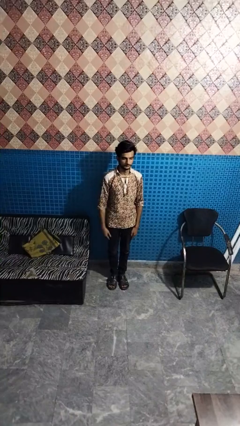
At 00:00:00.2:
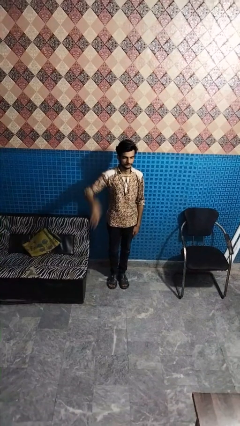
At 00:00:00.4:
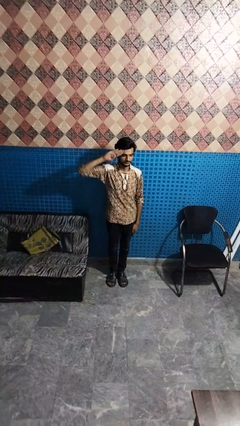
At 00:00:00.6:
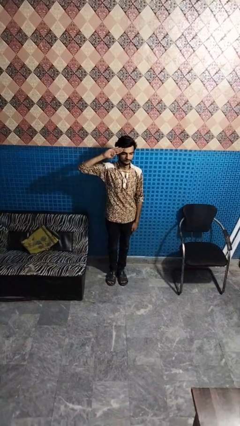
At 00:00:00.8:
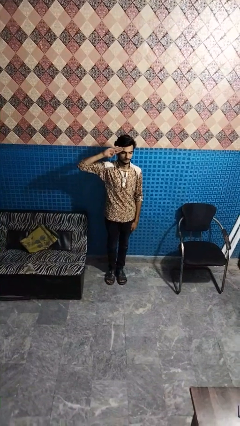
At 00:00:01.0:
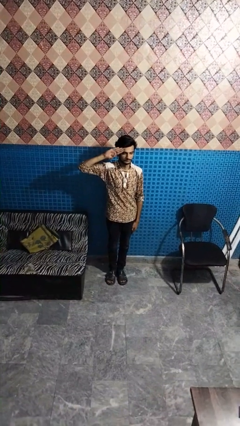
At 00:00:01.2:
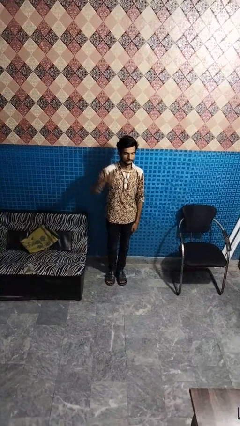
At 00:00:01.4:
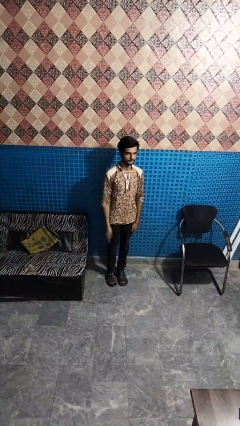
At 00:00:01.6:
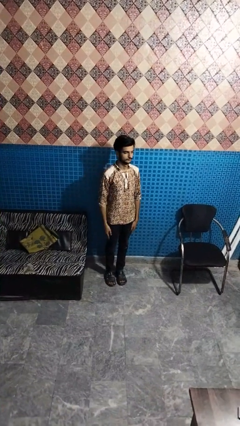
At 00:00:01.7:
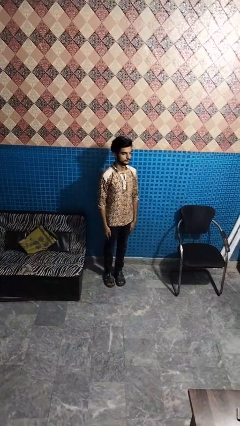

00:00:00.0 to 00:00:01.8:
person salutes

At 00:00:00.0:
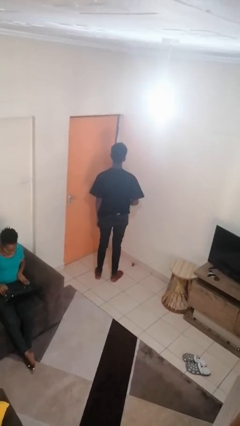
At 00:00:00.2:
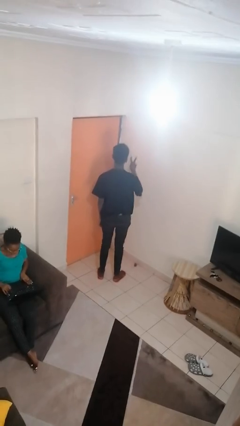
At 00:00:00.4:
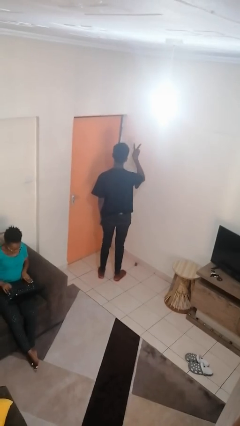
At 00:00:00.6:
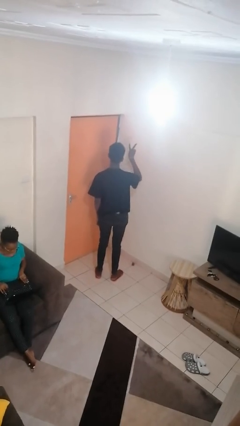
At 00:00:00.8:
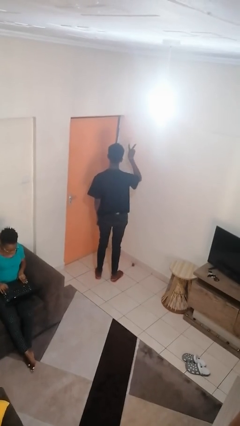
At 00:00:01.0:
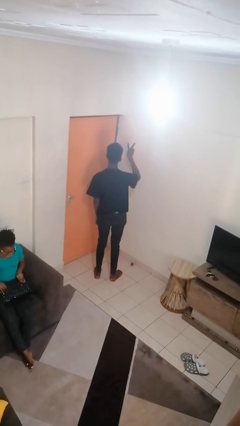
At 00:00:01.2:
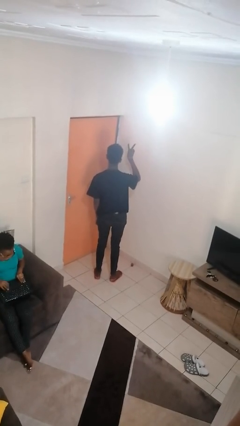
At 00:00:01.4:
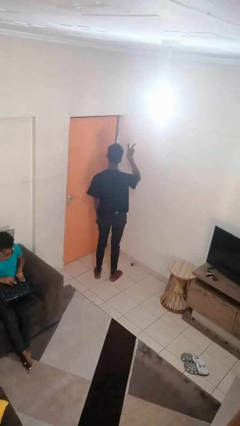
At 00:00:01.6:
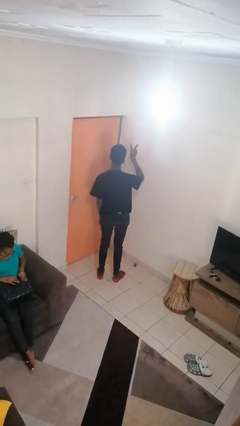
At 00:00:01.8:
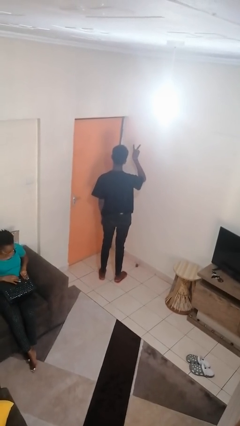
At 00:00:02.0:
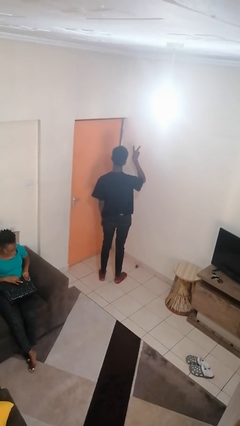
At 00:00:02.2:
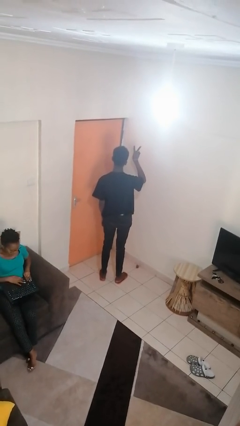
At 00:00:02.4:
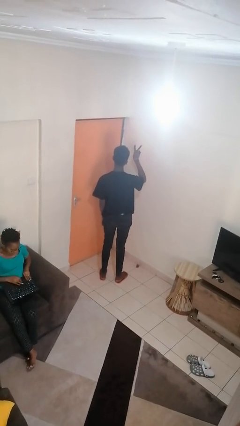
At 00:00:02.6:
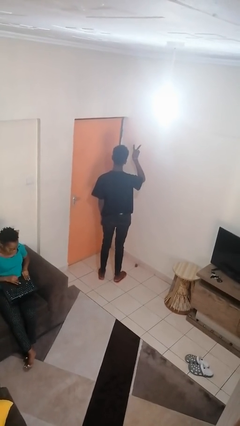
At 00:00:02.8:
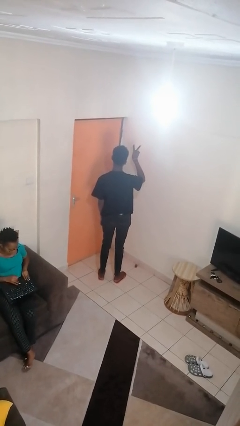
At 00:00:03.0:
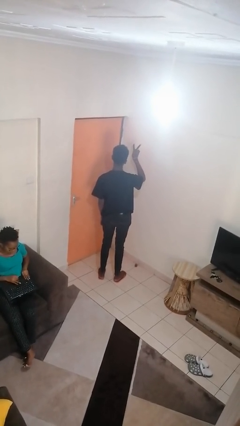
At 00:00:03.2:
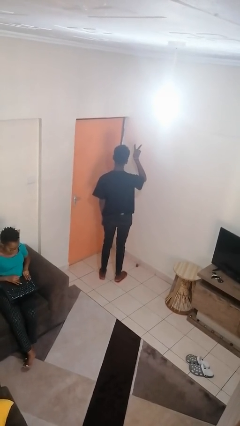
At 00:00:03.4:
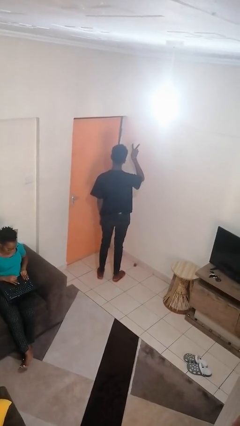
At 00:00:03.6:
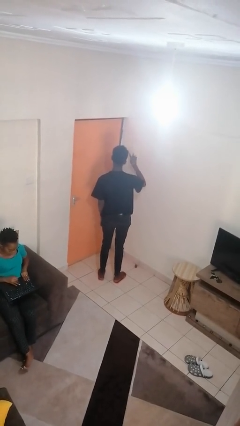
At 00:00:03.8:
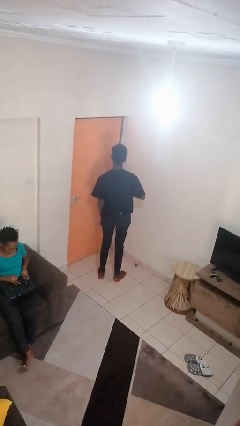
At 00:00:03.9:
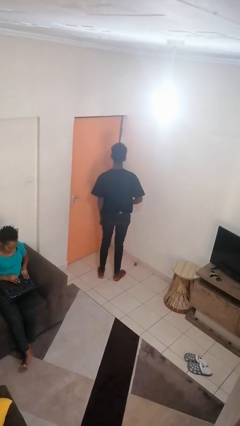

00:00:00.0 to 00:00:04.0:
person gestures peace

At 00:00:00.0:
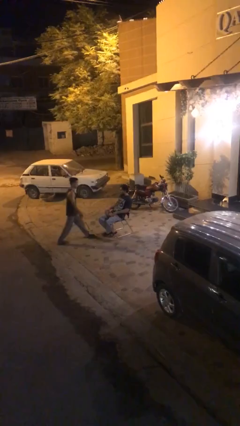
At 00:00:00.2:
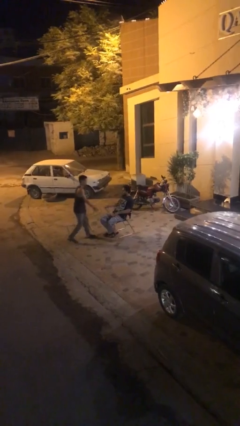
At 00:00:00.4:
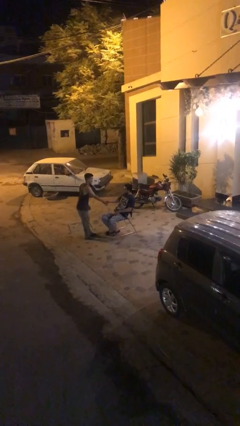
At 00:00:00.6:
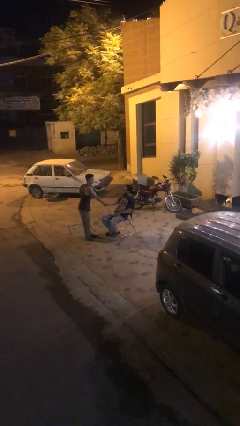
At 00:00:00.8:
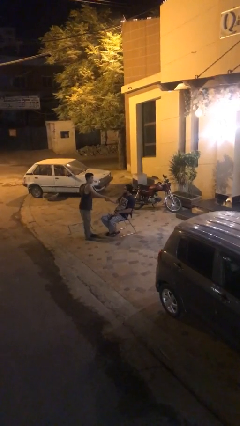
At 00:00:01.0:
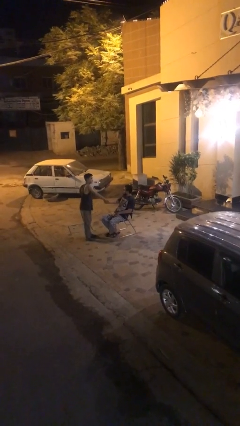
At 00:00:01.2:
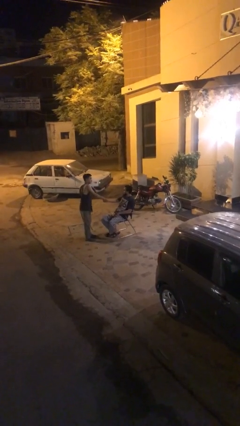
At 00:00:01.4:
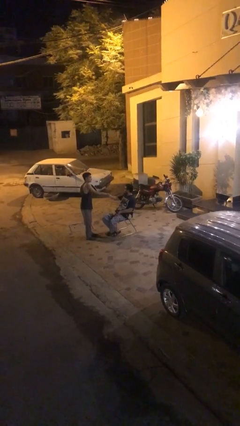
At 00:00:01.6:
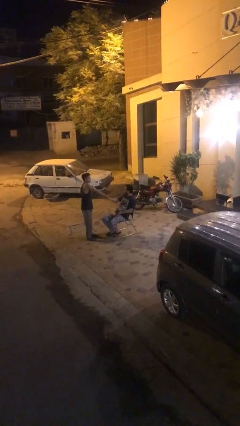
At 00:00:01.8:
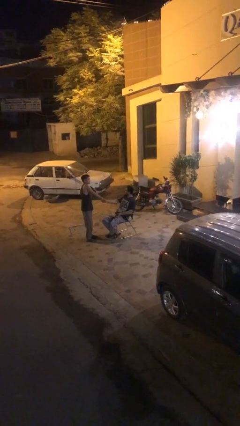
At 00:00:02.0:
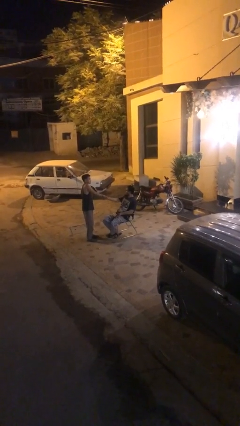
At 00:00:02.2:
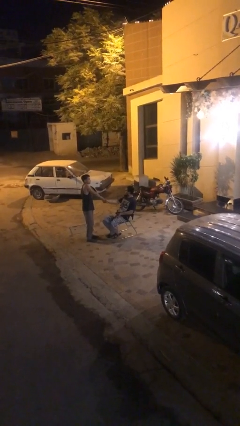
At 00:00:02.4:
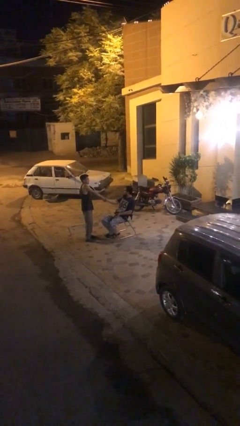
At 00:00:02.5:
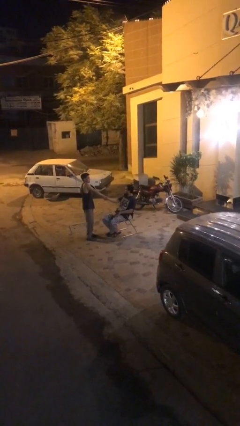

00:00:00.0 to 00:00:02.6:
person shakes hand

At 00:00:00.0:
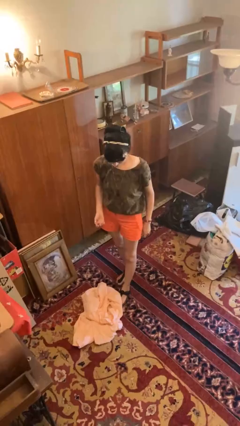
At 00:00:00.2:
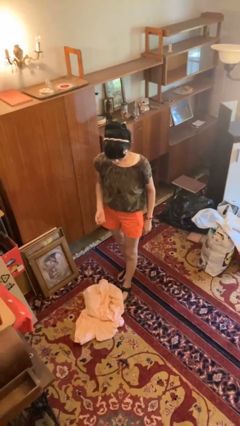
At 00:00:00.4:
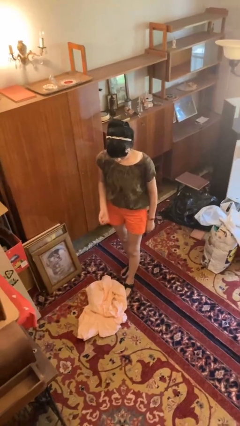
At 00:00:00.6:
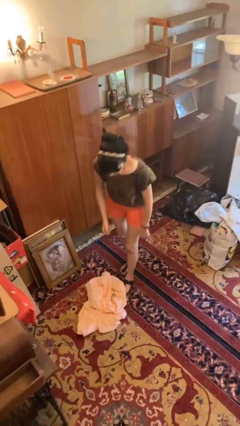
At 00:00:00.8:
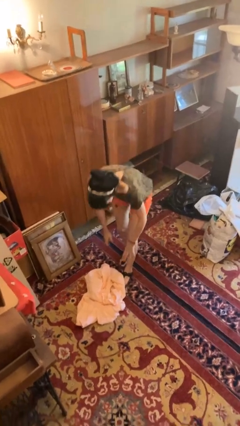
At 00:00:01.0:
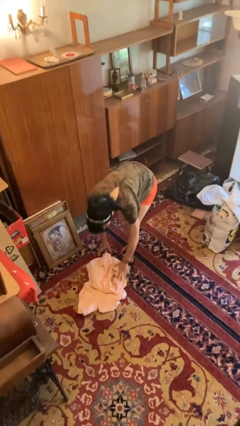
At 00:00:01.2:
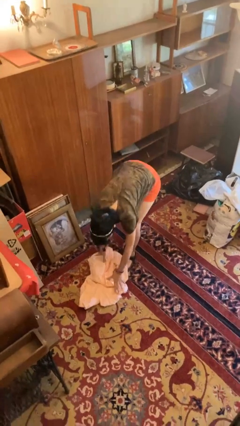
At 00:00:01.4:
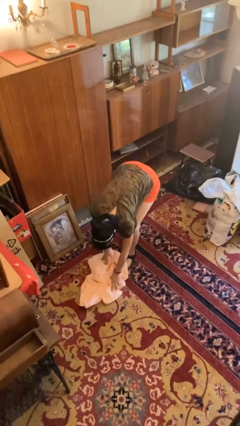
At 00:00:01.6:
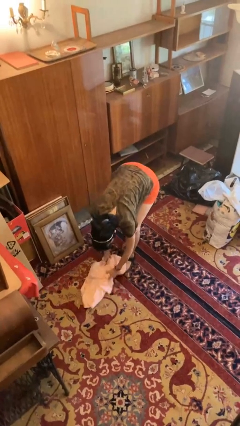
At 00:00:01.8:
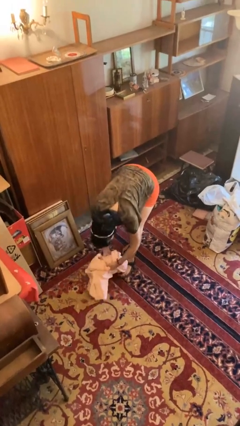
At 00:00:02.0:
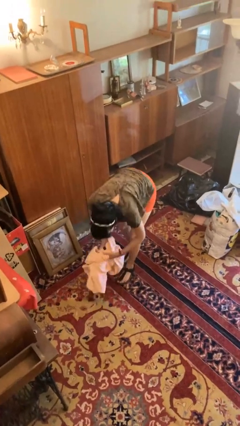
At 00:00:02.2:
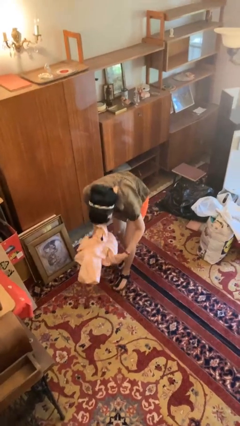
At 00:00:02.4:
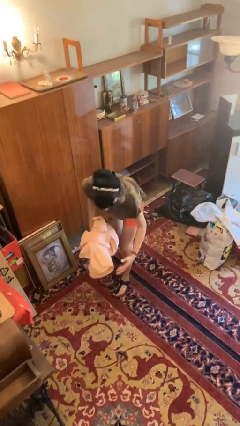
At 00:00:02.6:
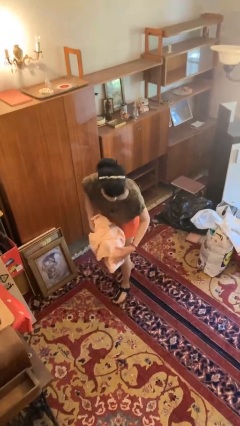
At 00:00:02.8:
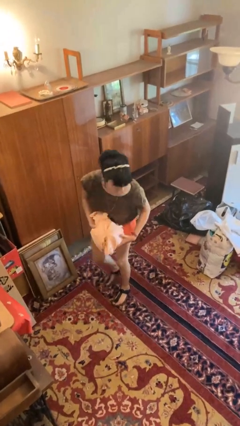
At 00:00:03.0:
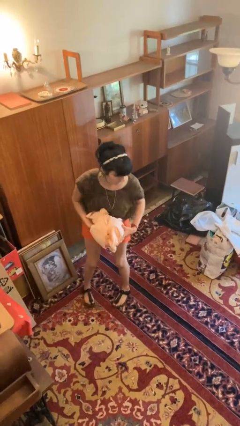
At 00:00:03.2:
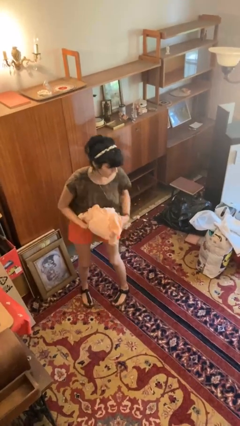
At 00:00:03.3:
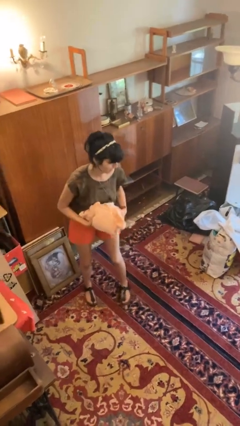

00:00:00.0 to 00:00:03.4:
person picks up object from floor

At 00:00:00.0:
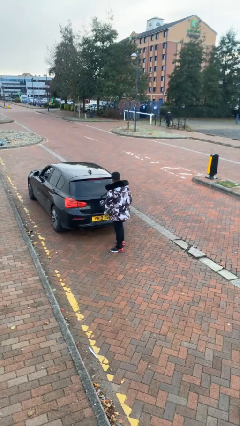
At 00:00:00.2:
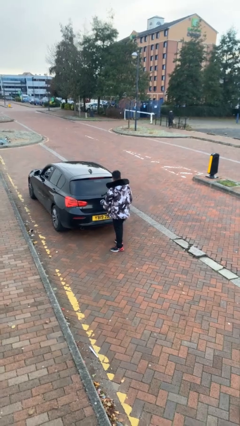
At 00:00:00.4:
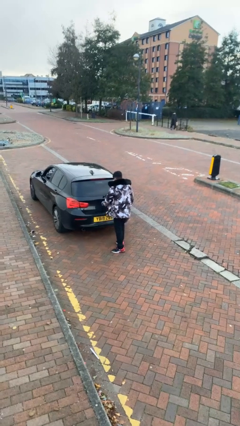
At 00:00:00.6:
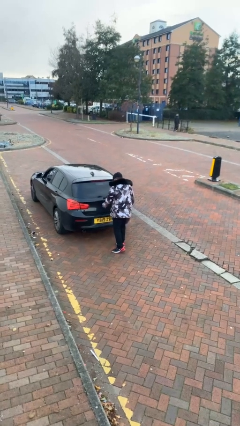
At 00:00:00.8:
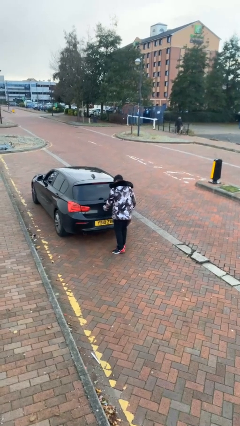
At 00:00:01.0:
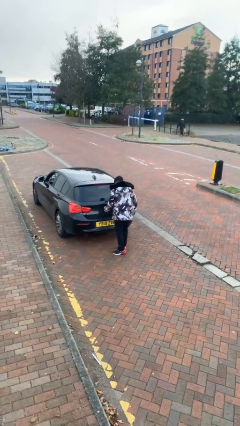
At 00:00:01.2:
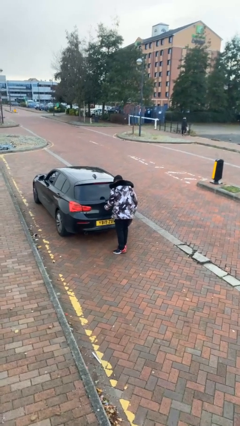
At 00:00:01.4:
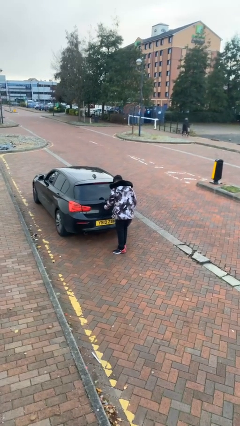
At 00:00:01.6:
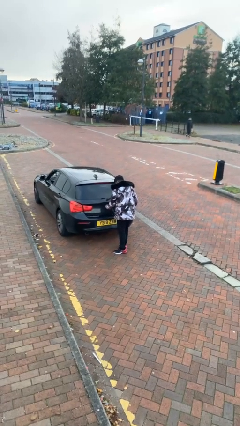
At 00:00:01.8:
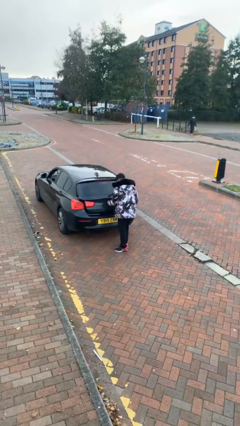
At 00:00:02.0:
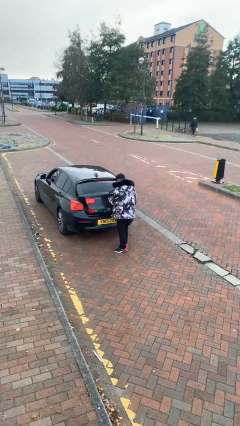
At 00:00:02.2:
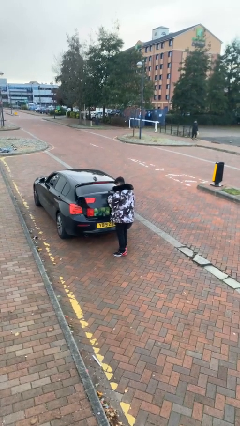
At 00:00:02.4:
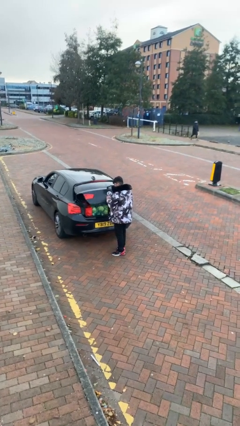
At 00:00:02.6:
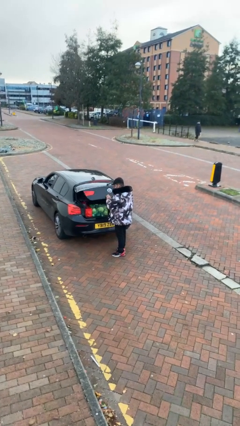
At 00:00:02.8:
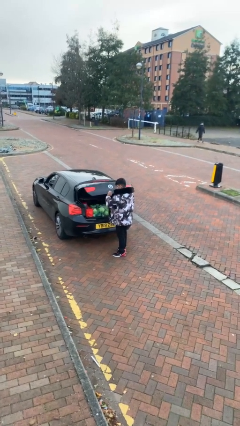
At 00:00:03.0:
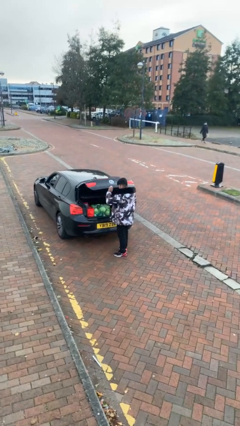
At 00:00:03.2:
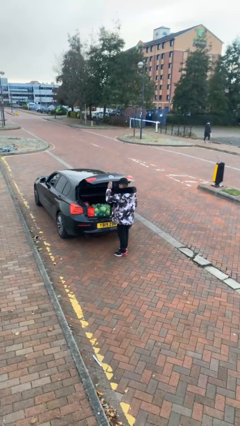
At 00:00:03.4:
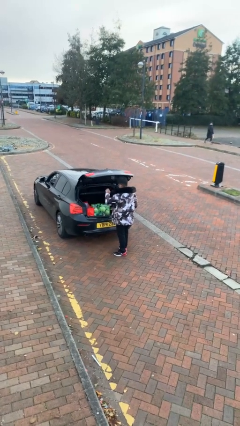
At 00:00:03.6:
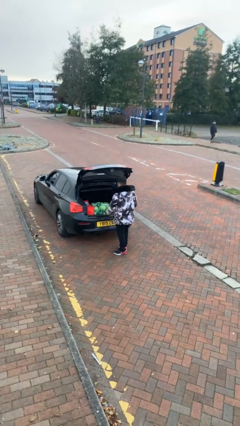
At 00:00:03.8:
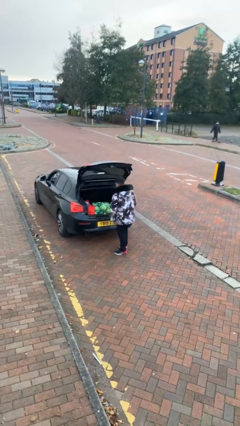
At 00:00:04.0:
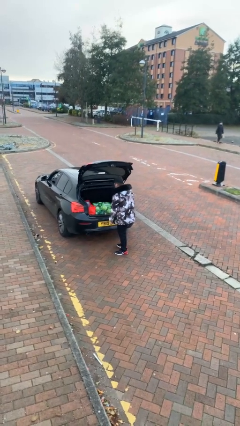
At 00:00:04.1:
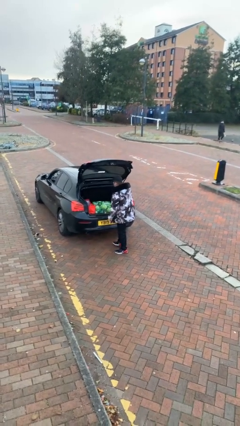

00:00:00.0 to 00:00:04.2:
person opens car trunk

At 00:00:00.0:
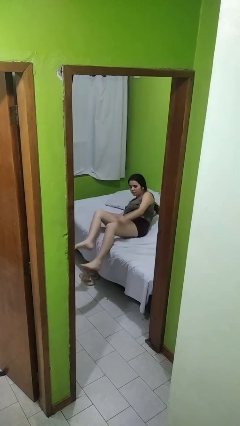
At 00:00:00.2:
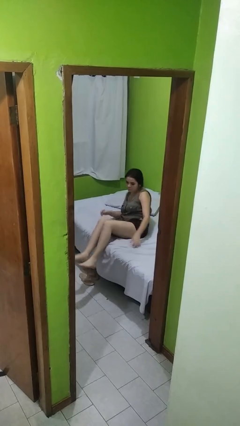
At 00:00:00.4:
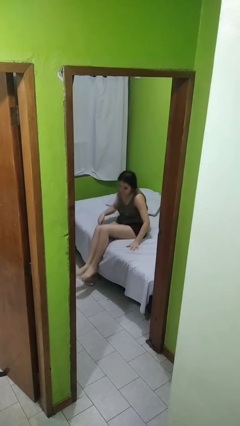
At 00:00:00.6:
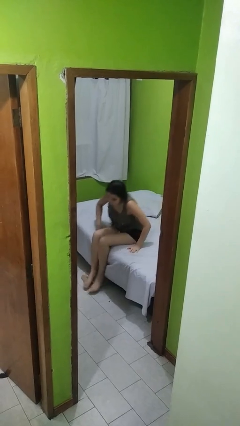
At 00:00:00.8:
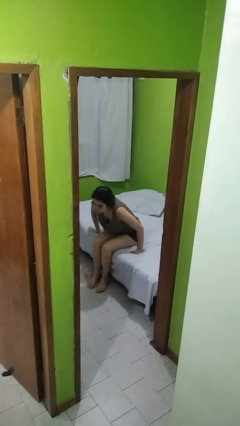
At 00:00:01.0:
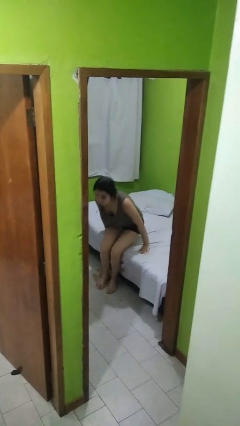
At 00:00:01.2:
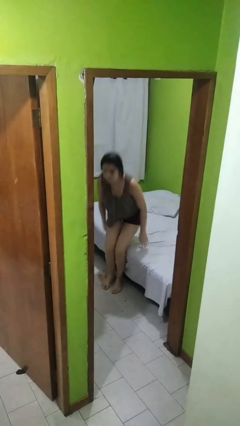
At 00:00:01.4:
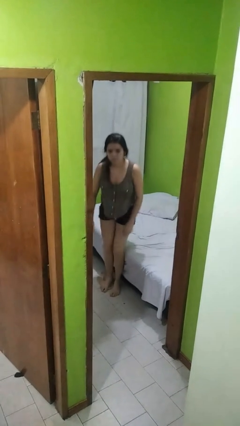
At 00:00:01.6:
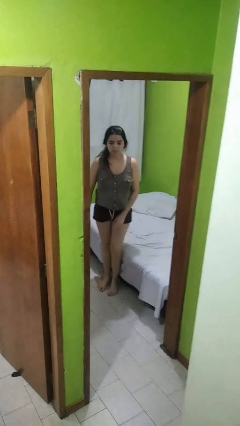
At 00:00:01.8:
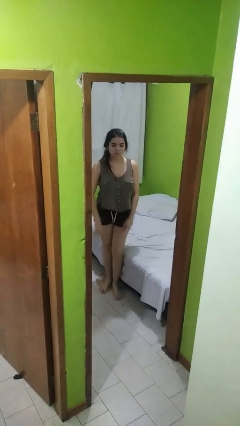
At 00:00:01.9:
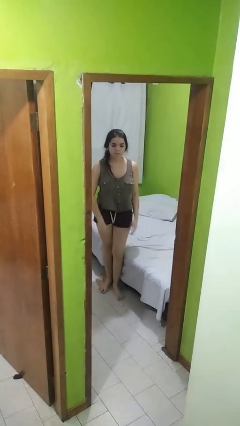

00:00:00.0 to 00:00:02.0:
person stands up
